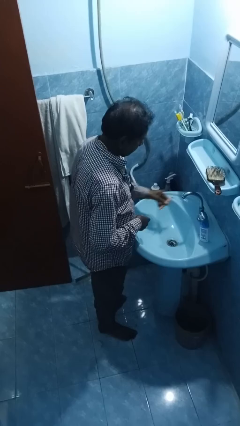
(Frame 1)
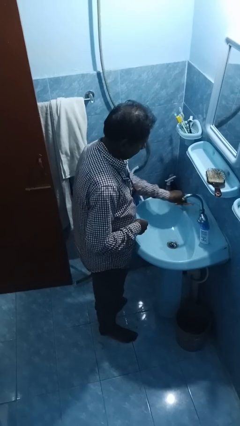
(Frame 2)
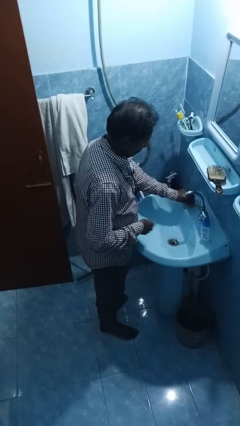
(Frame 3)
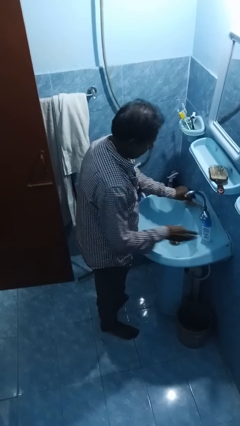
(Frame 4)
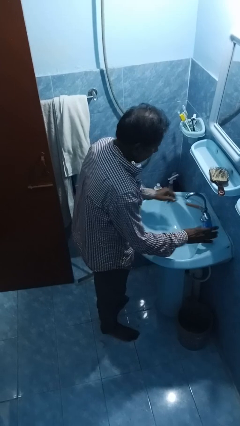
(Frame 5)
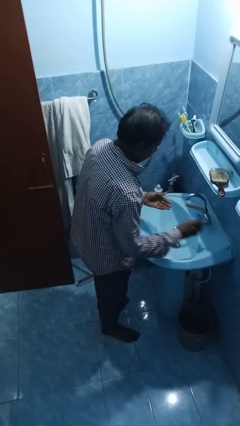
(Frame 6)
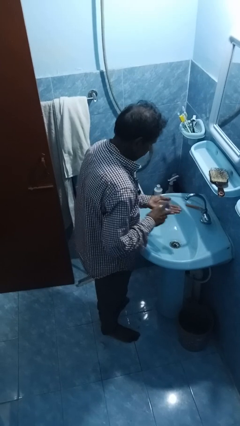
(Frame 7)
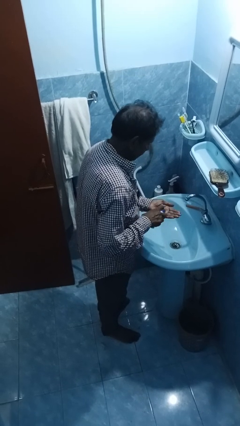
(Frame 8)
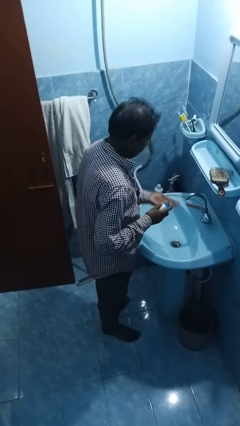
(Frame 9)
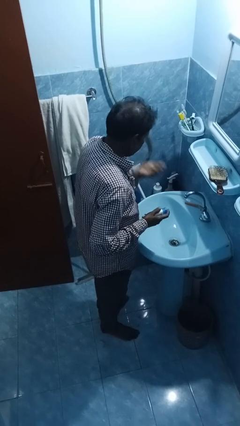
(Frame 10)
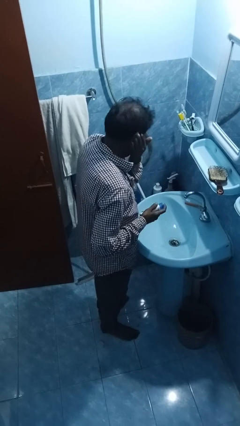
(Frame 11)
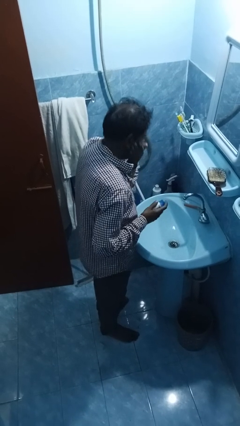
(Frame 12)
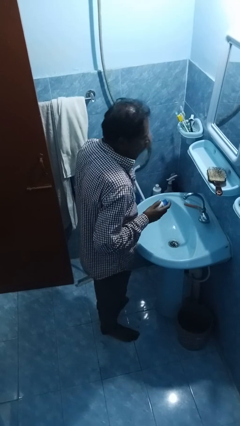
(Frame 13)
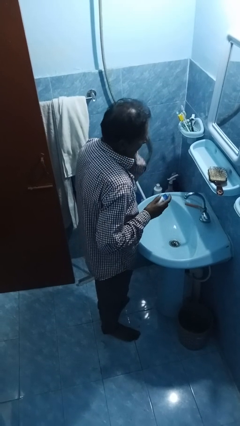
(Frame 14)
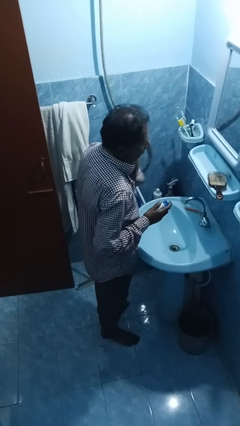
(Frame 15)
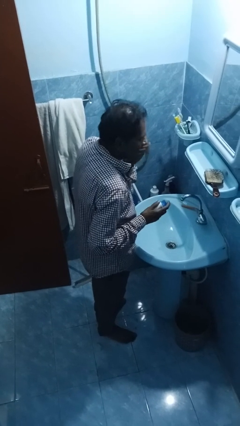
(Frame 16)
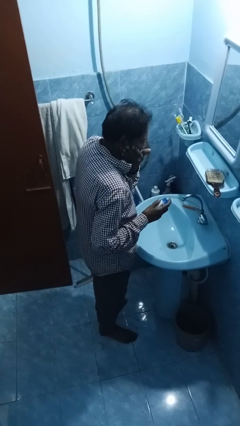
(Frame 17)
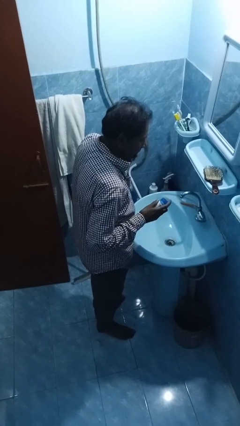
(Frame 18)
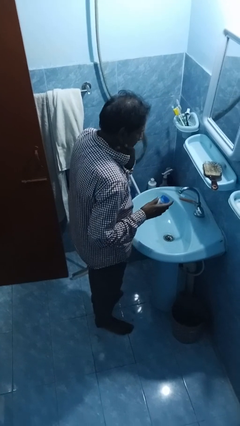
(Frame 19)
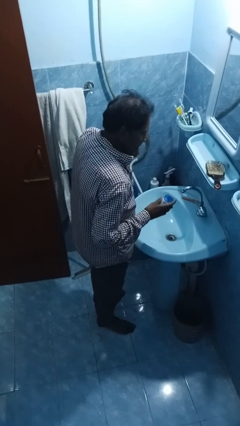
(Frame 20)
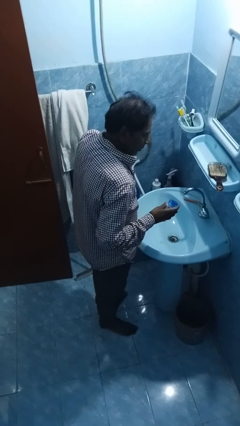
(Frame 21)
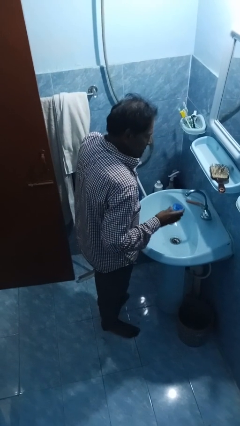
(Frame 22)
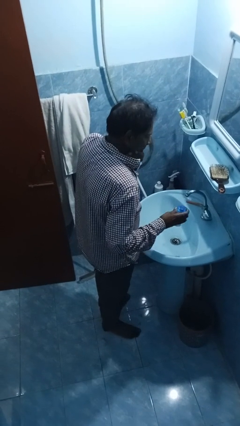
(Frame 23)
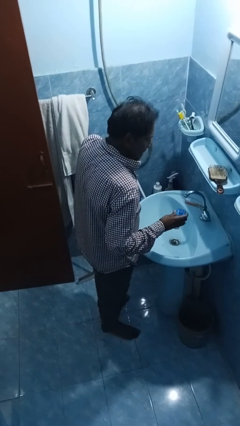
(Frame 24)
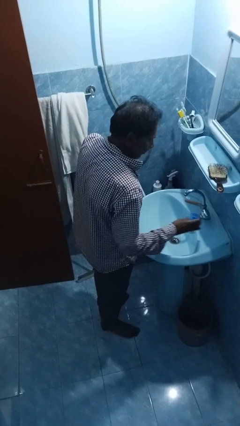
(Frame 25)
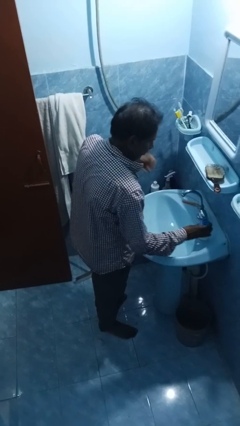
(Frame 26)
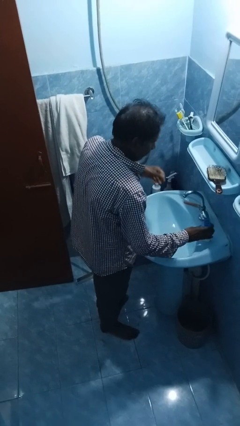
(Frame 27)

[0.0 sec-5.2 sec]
person applies shaving cream

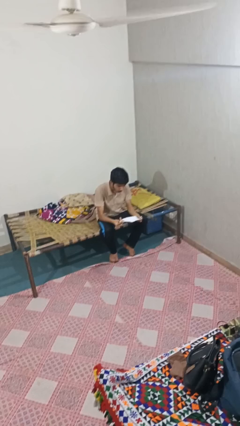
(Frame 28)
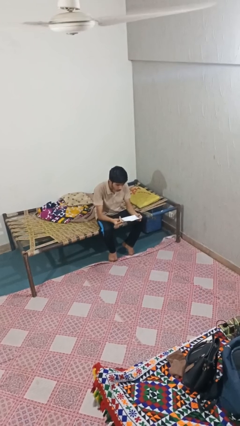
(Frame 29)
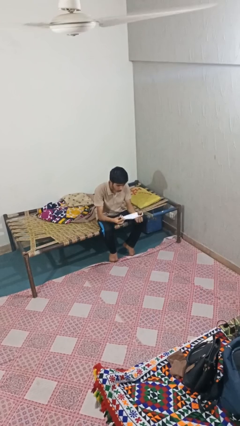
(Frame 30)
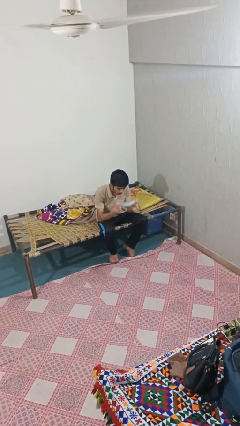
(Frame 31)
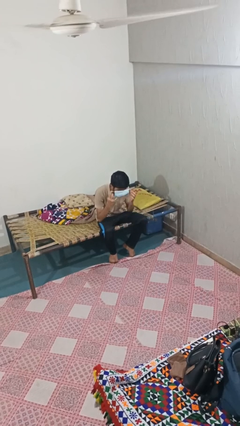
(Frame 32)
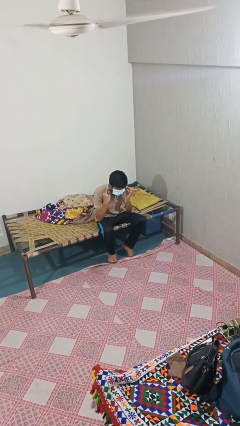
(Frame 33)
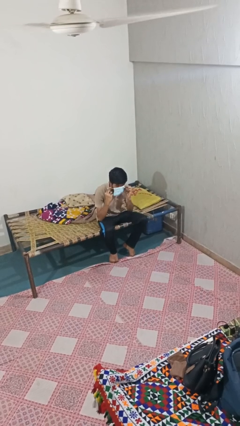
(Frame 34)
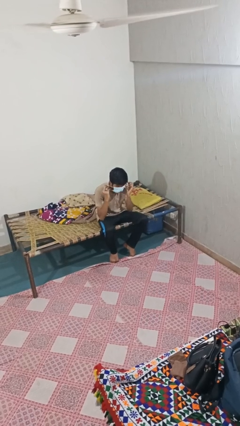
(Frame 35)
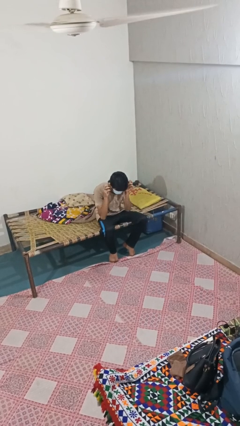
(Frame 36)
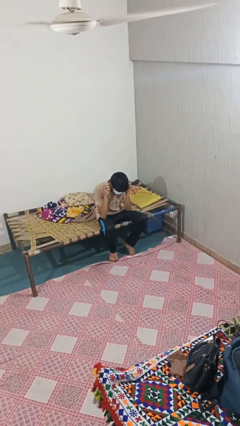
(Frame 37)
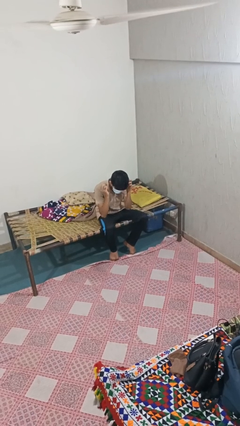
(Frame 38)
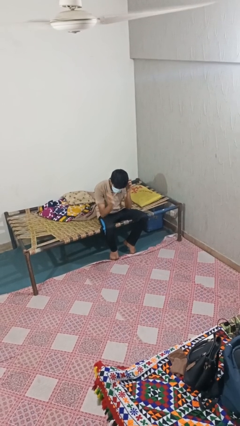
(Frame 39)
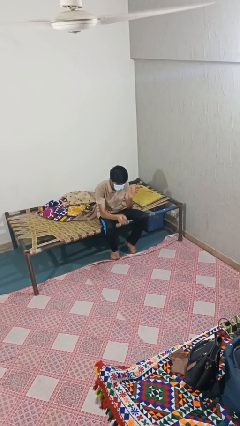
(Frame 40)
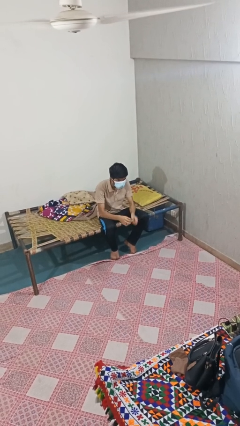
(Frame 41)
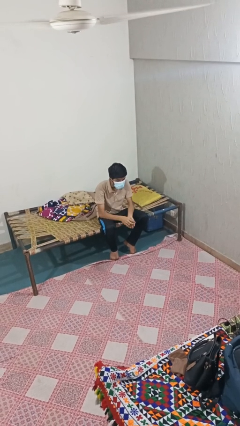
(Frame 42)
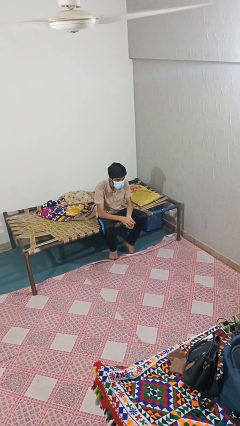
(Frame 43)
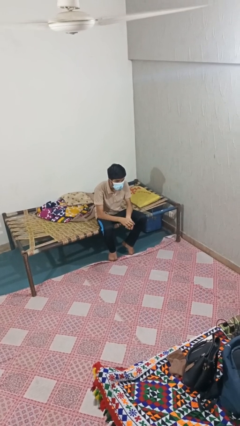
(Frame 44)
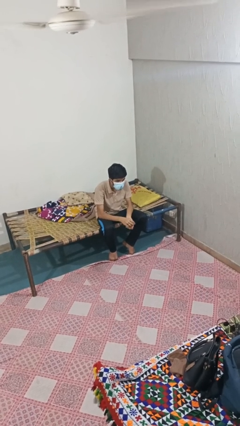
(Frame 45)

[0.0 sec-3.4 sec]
person puts on facemask

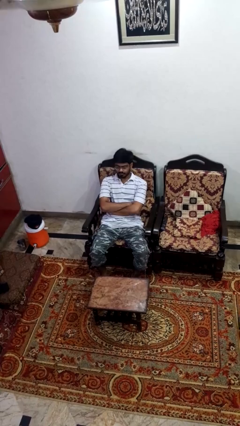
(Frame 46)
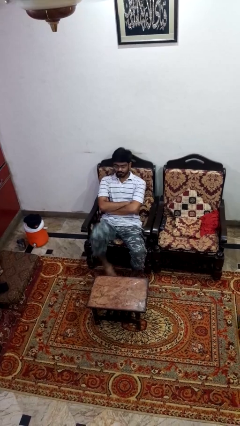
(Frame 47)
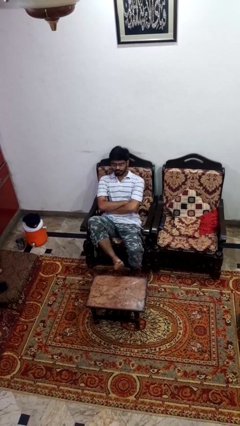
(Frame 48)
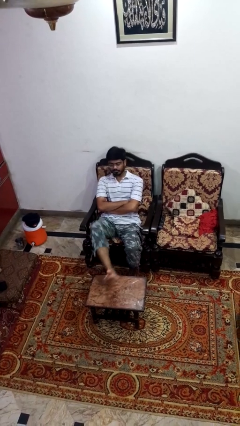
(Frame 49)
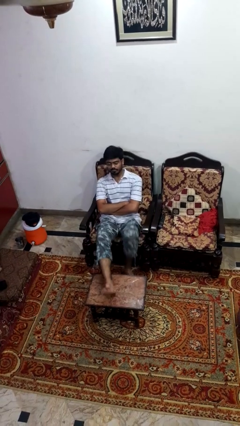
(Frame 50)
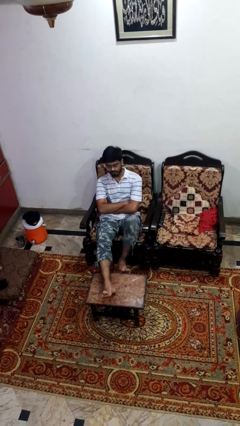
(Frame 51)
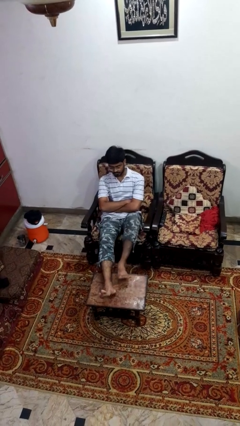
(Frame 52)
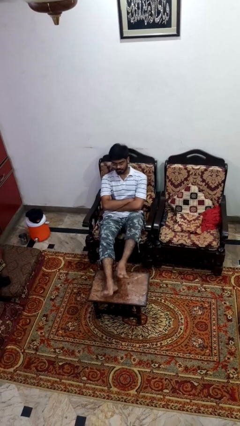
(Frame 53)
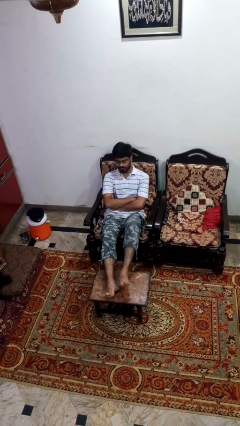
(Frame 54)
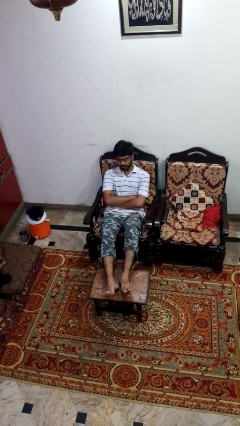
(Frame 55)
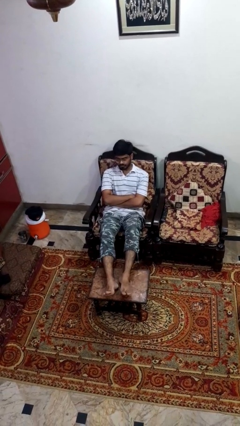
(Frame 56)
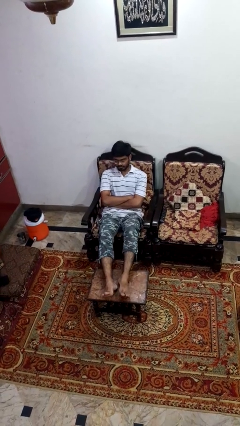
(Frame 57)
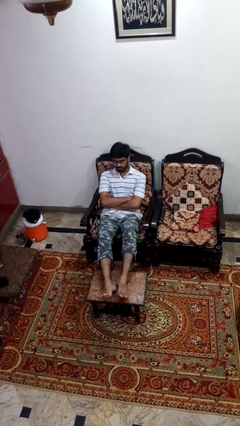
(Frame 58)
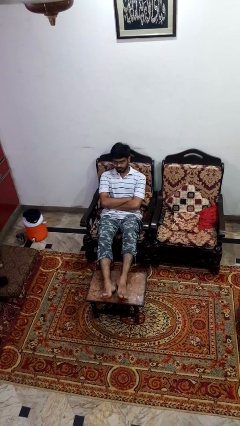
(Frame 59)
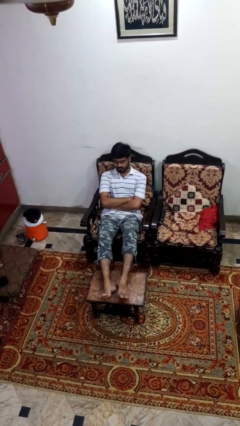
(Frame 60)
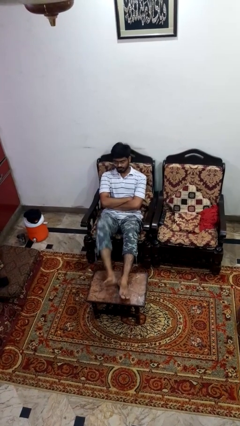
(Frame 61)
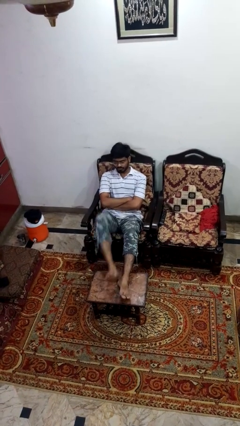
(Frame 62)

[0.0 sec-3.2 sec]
person puts feet up

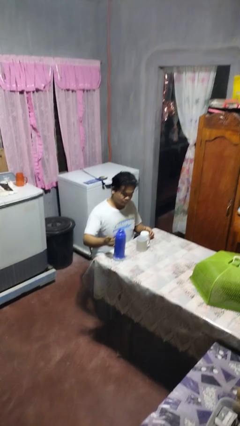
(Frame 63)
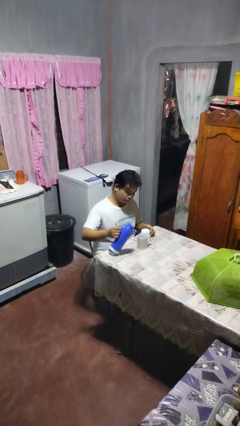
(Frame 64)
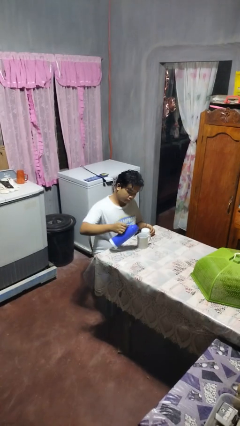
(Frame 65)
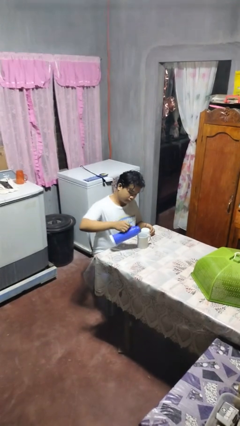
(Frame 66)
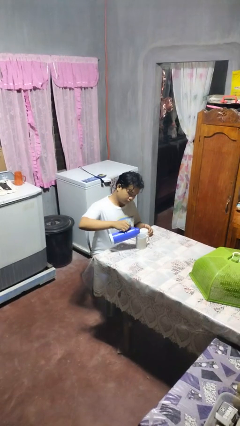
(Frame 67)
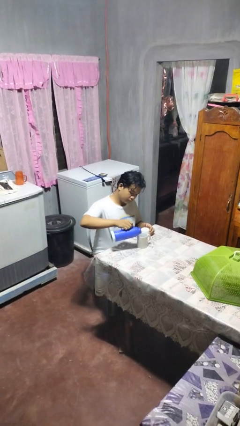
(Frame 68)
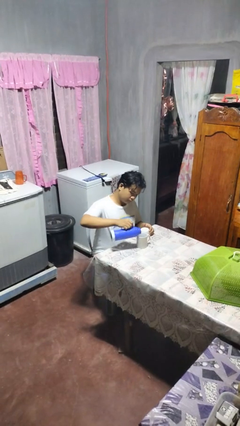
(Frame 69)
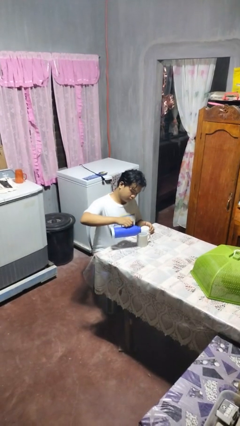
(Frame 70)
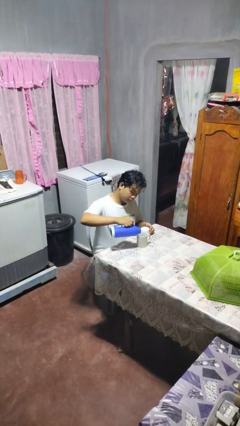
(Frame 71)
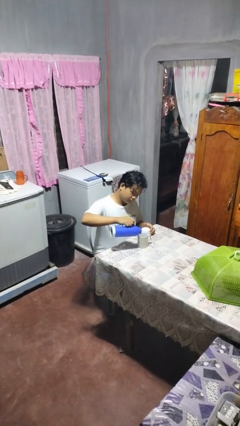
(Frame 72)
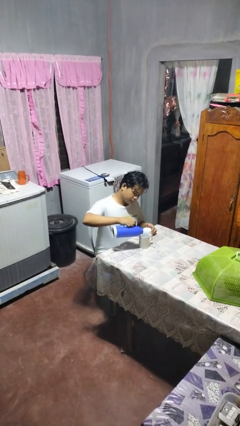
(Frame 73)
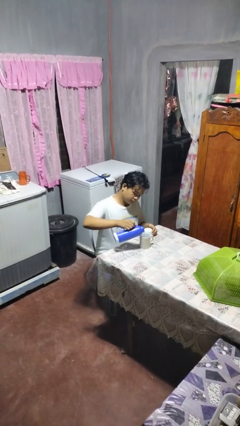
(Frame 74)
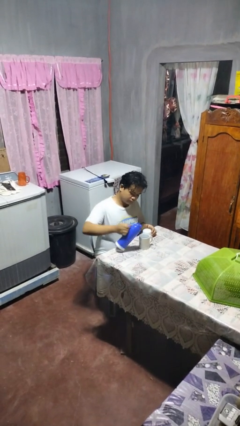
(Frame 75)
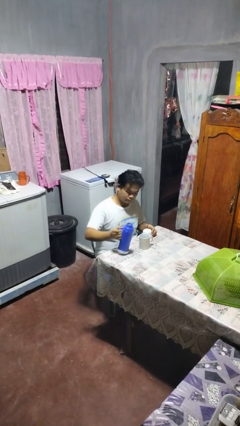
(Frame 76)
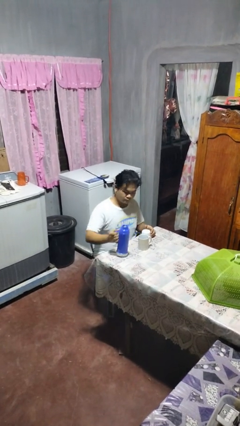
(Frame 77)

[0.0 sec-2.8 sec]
person pours coffee into mug

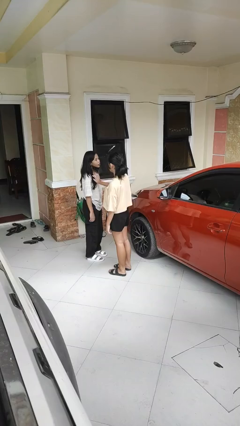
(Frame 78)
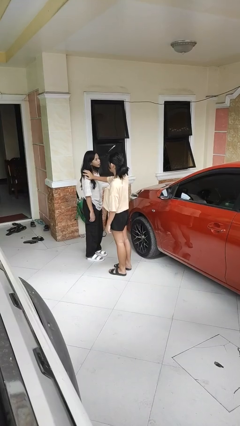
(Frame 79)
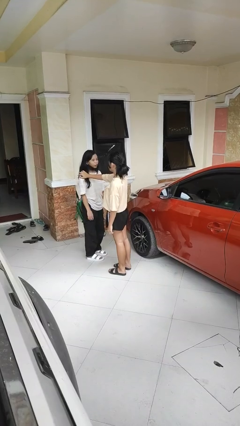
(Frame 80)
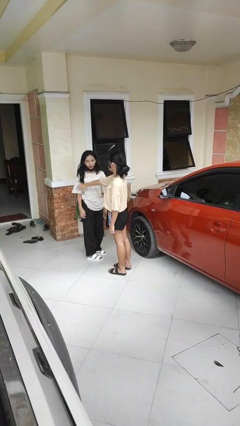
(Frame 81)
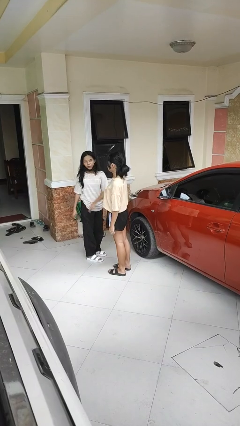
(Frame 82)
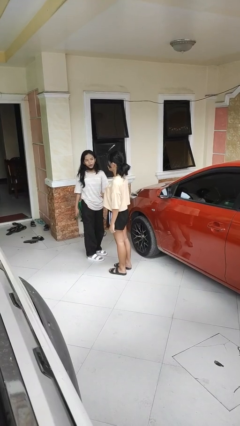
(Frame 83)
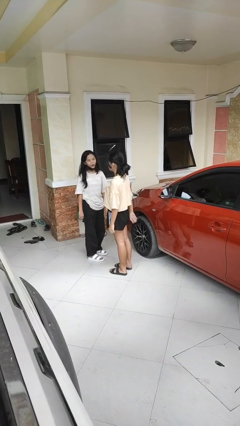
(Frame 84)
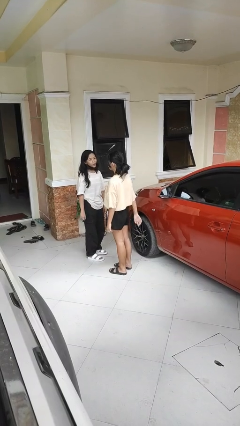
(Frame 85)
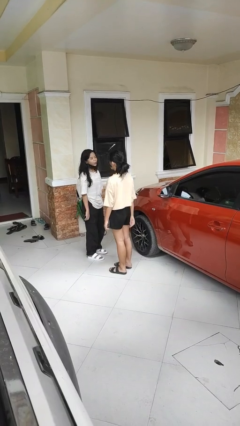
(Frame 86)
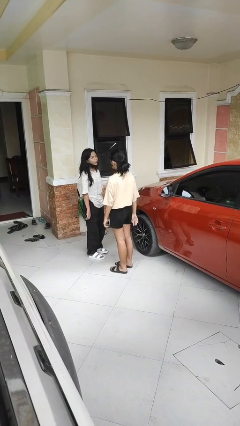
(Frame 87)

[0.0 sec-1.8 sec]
person shoves person

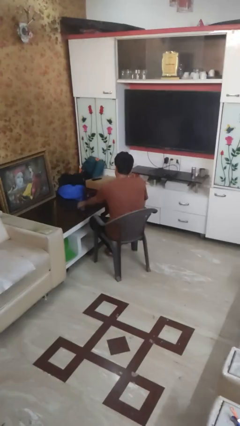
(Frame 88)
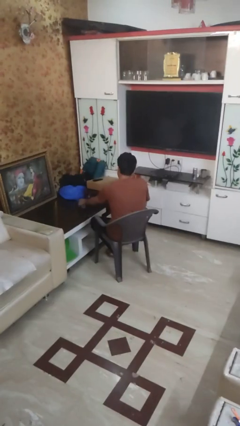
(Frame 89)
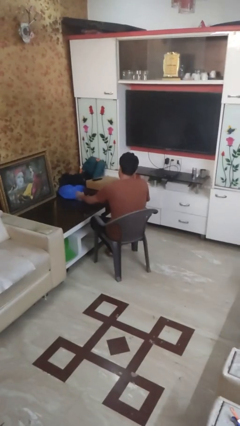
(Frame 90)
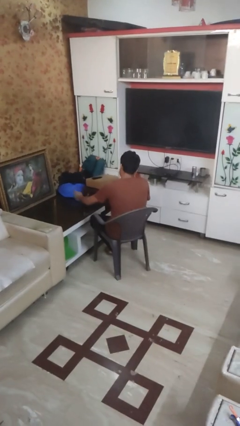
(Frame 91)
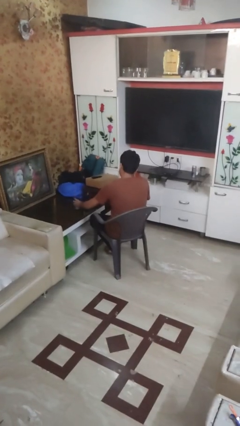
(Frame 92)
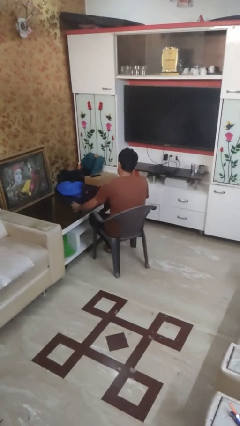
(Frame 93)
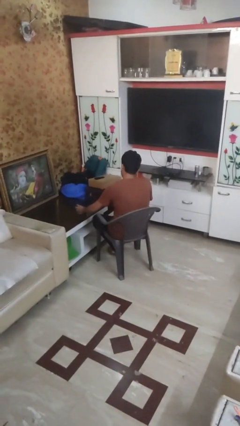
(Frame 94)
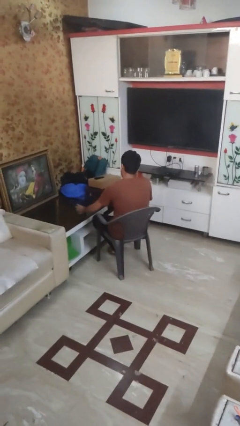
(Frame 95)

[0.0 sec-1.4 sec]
person sets upright glass
